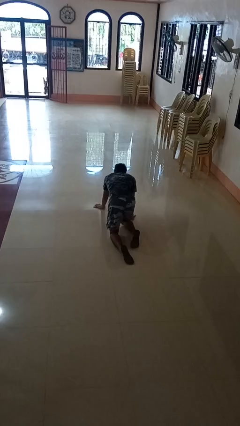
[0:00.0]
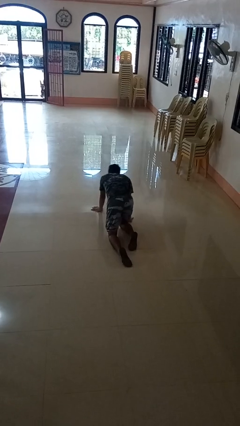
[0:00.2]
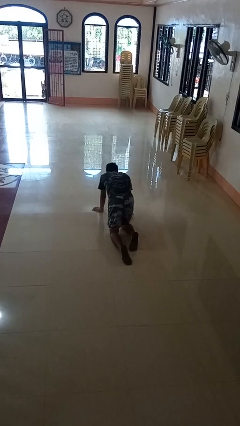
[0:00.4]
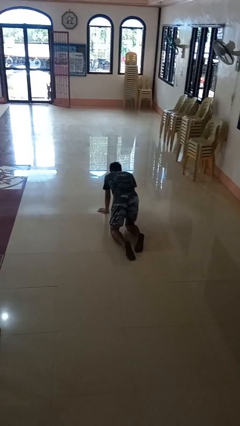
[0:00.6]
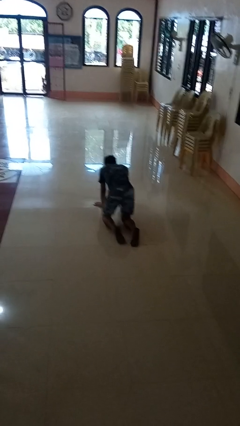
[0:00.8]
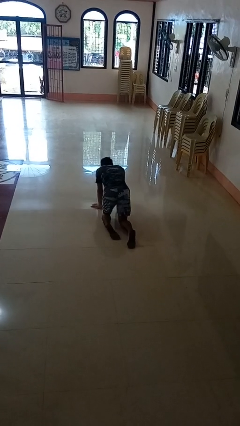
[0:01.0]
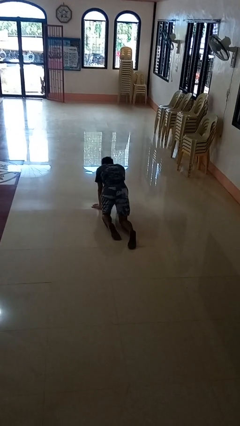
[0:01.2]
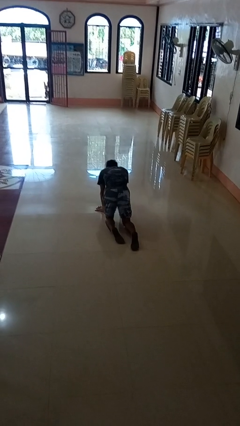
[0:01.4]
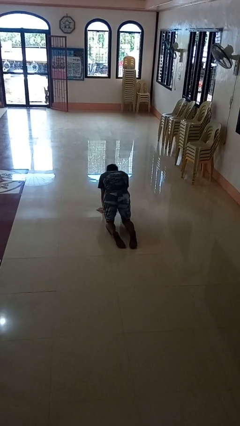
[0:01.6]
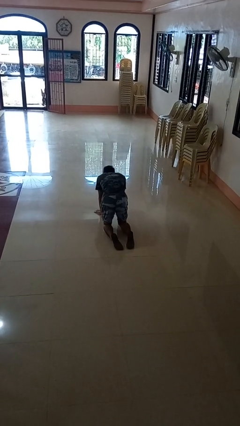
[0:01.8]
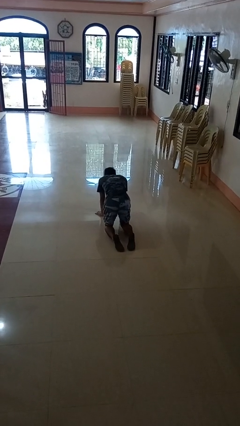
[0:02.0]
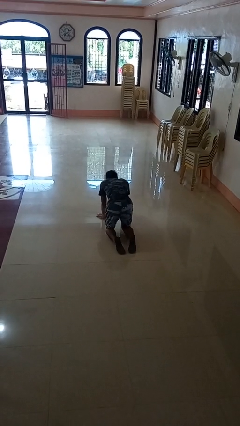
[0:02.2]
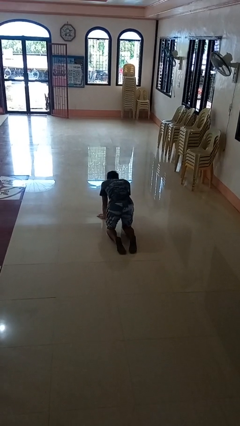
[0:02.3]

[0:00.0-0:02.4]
person crawls

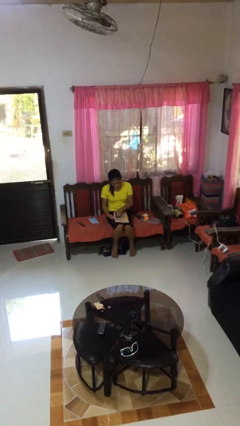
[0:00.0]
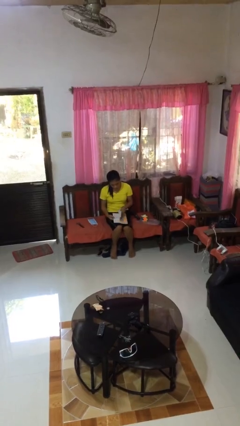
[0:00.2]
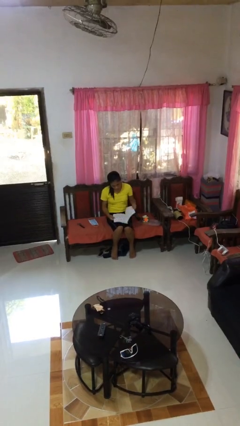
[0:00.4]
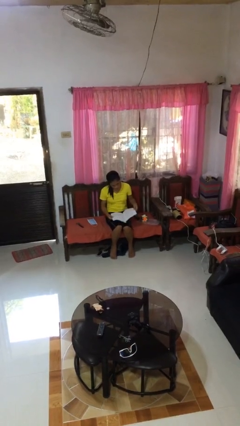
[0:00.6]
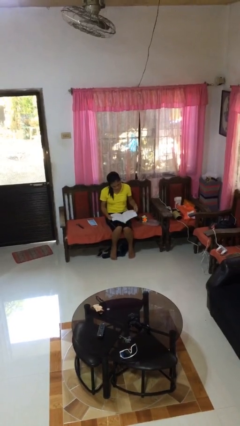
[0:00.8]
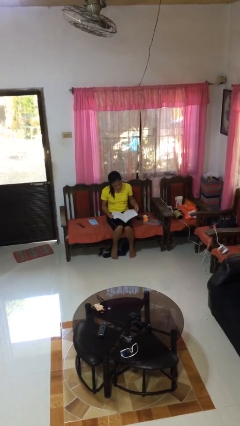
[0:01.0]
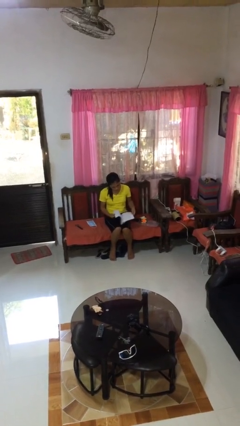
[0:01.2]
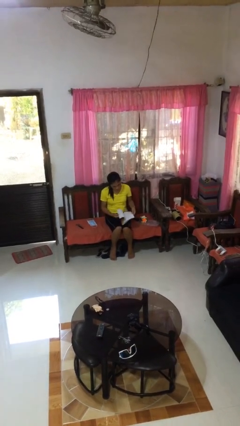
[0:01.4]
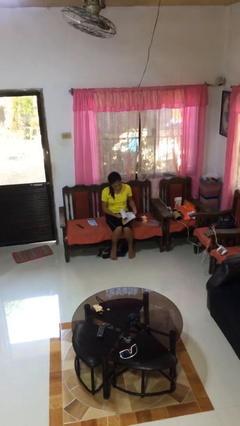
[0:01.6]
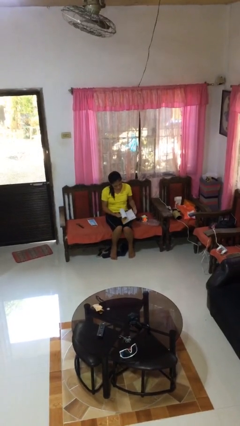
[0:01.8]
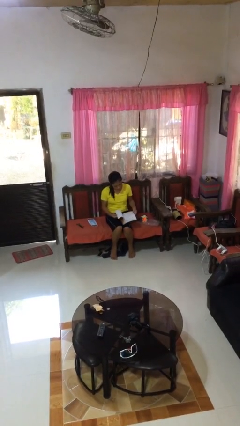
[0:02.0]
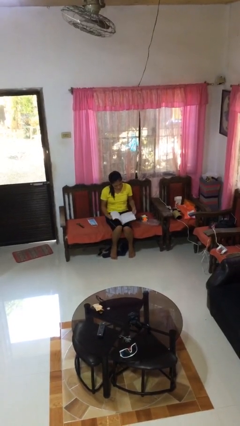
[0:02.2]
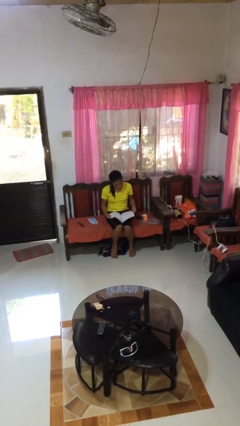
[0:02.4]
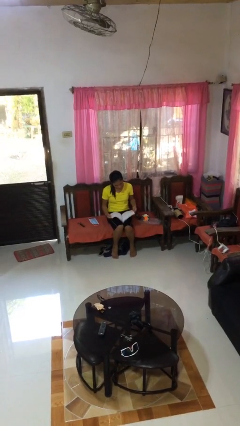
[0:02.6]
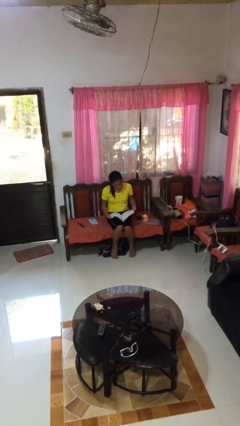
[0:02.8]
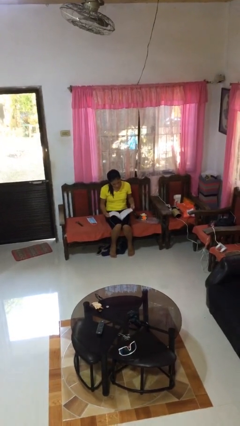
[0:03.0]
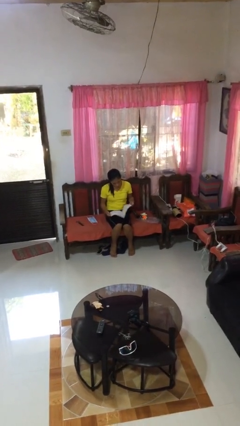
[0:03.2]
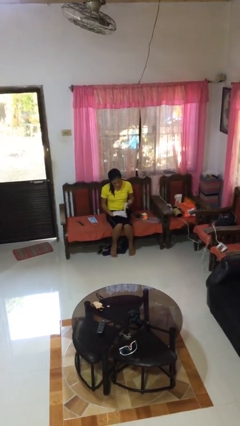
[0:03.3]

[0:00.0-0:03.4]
person reads book

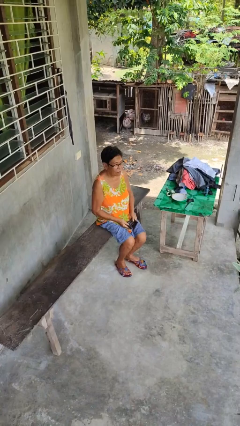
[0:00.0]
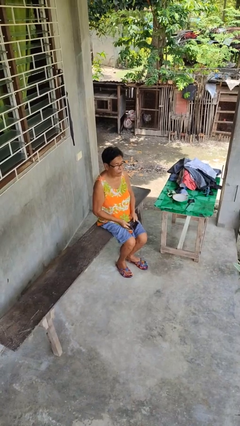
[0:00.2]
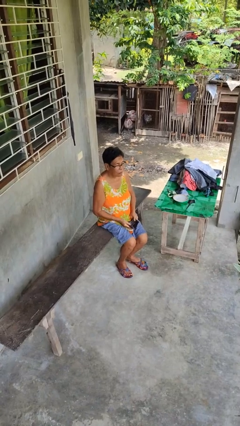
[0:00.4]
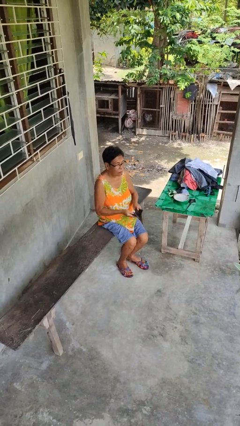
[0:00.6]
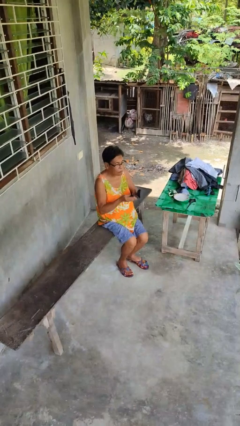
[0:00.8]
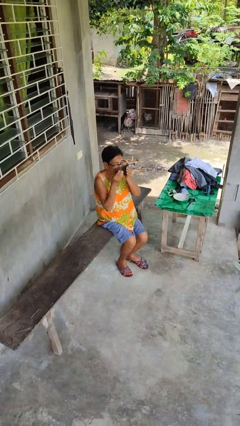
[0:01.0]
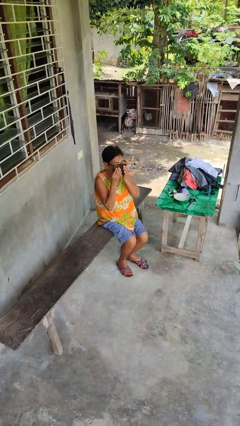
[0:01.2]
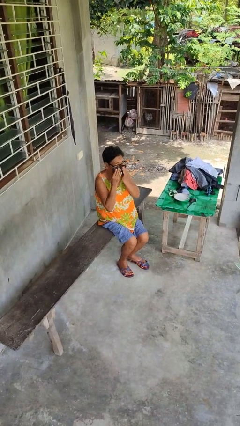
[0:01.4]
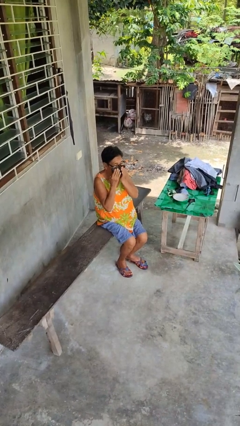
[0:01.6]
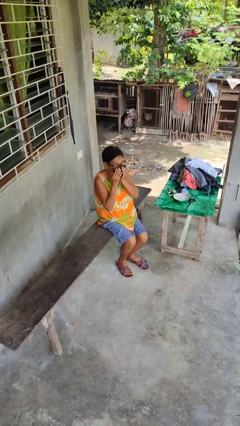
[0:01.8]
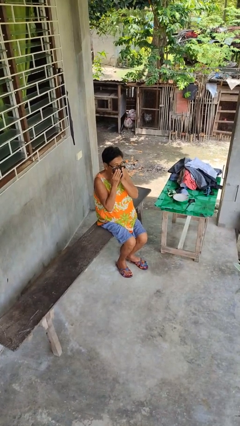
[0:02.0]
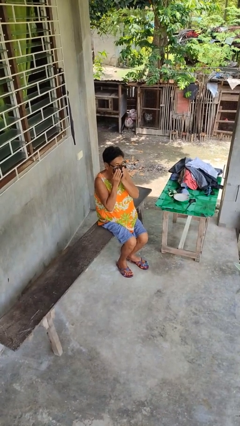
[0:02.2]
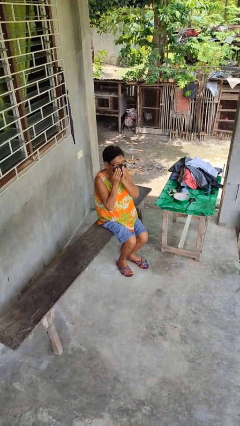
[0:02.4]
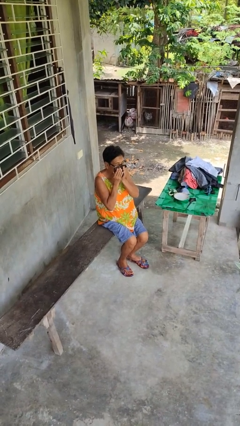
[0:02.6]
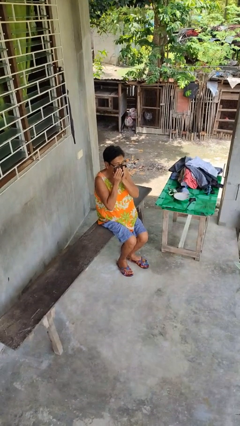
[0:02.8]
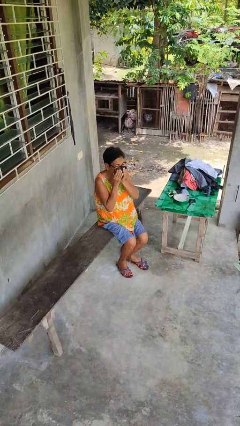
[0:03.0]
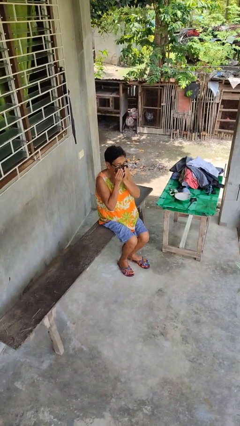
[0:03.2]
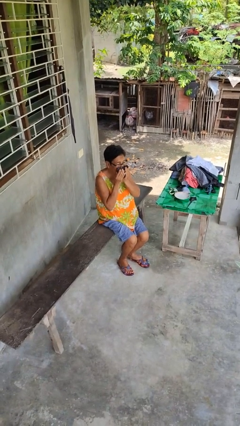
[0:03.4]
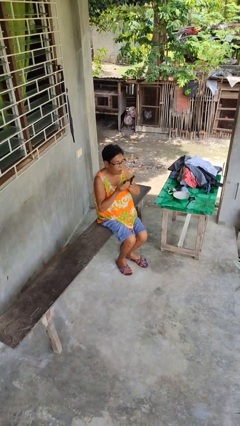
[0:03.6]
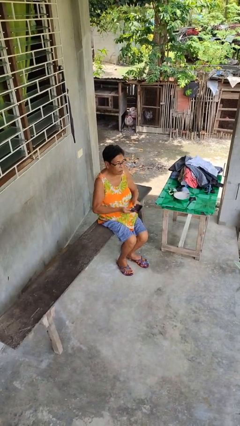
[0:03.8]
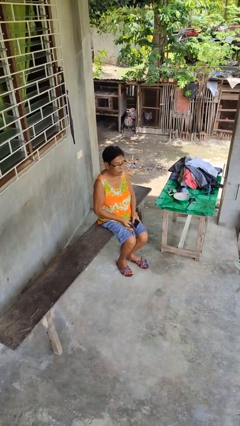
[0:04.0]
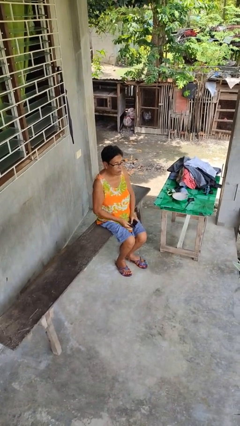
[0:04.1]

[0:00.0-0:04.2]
person blows nose

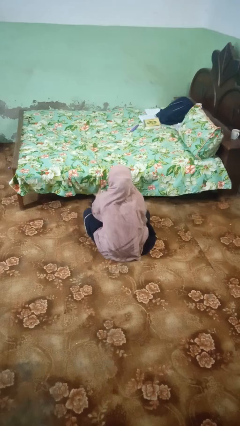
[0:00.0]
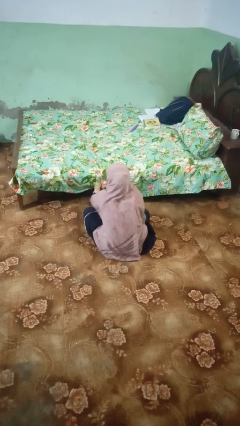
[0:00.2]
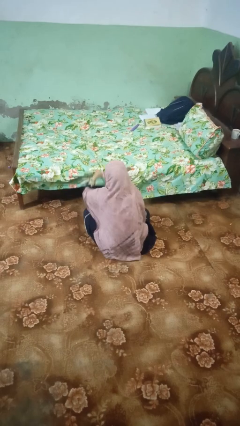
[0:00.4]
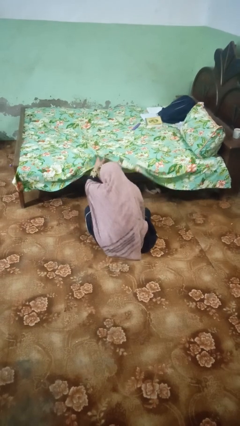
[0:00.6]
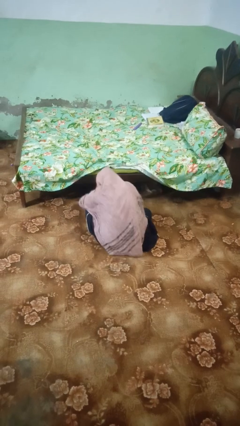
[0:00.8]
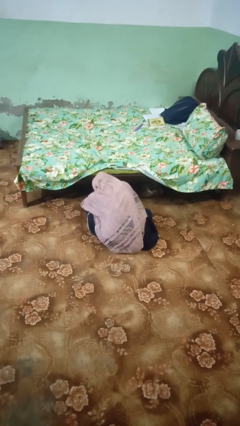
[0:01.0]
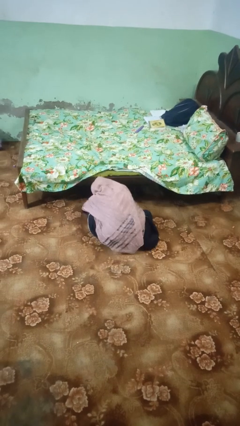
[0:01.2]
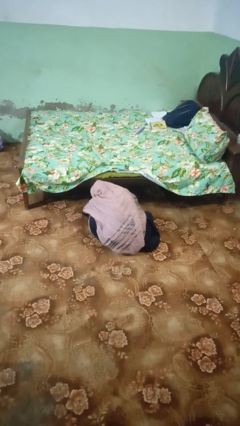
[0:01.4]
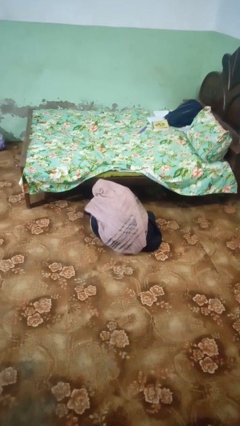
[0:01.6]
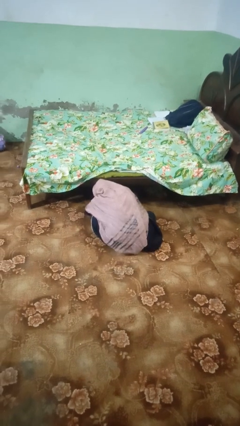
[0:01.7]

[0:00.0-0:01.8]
person searches under bed

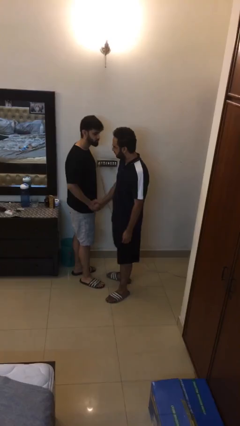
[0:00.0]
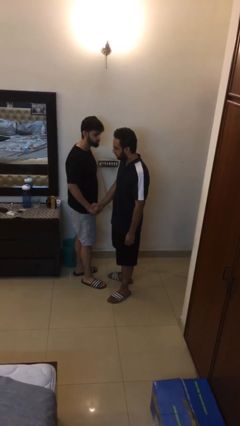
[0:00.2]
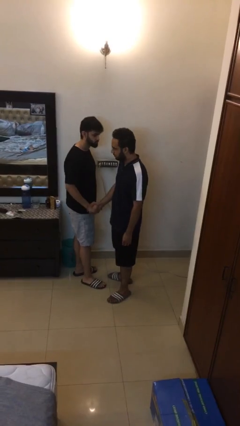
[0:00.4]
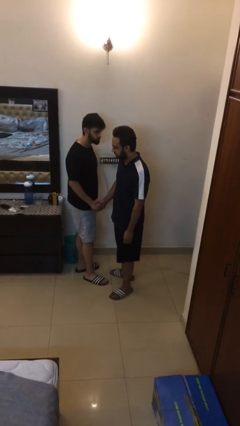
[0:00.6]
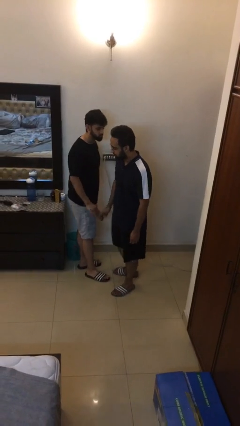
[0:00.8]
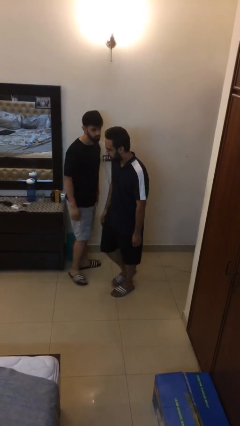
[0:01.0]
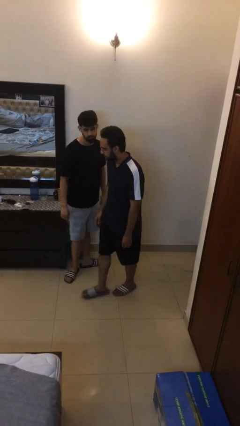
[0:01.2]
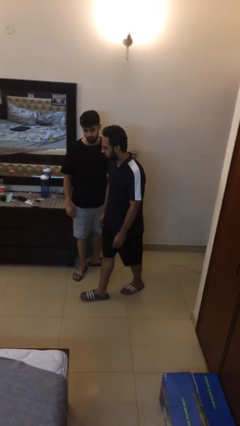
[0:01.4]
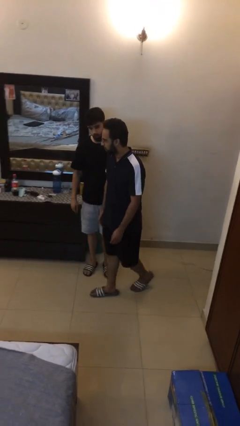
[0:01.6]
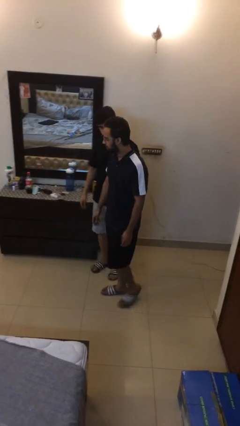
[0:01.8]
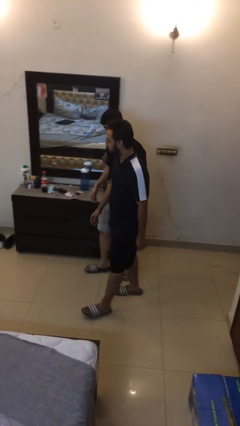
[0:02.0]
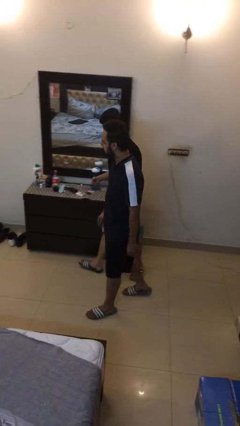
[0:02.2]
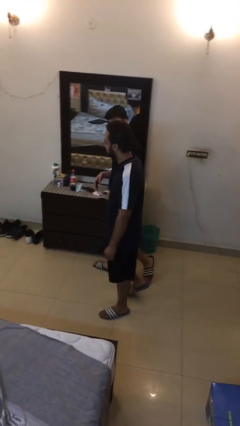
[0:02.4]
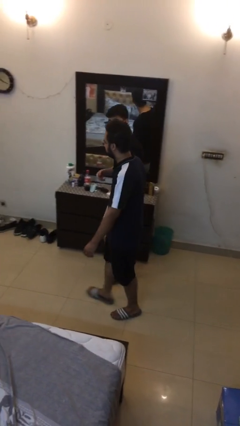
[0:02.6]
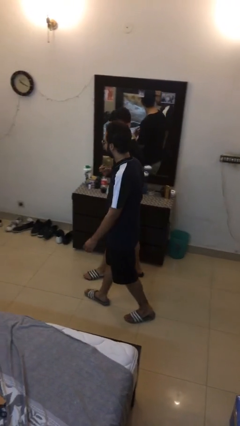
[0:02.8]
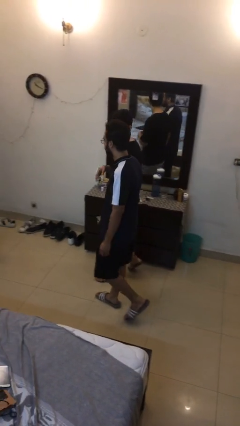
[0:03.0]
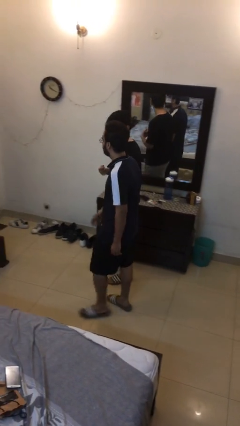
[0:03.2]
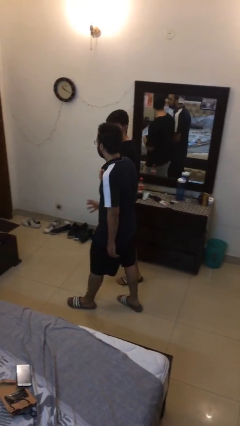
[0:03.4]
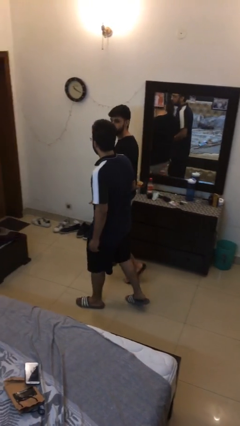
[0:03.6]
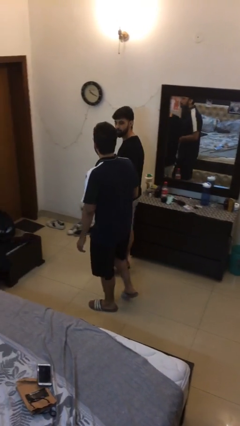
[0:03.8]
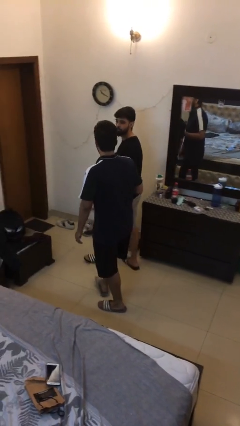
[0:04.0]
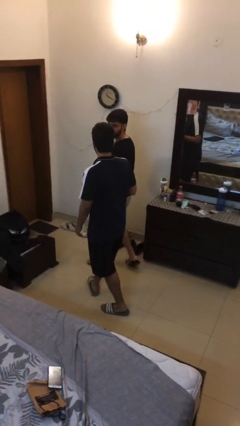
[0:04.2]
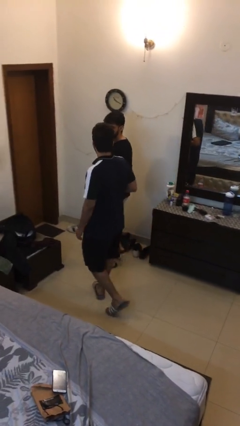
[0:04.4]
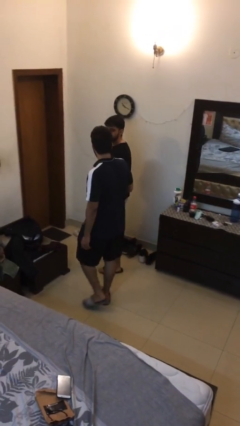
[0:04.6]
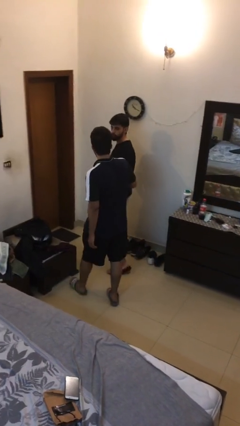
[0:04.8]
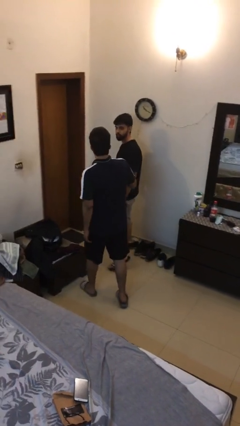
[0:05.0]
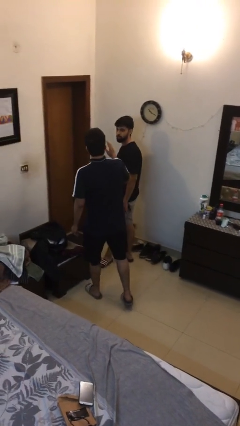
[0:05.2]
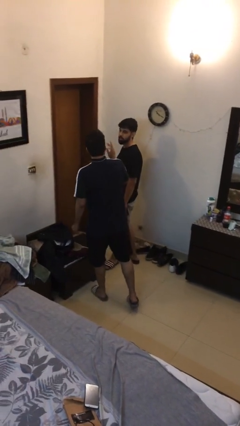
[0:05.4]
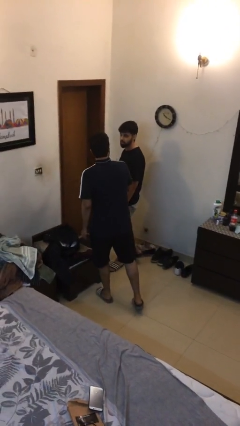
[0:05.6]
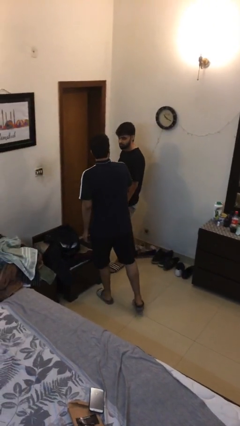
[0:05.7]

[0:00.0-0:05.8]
person talks to person

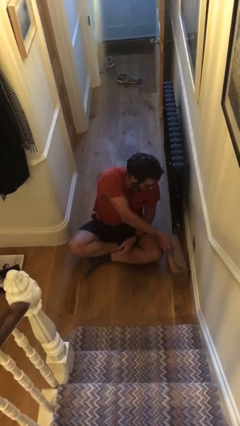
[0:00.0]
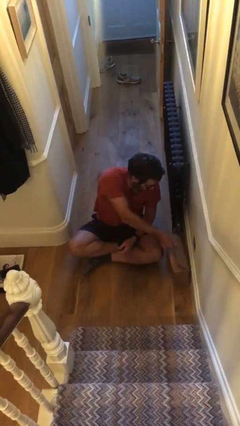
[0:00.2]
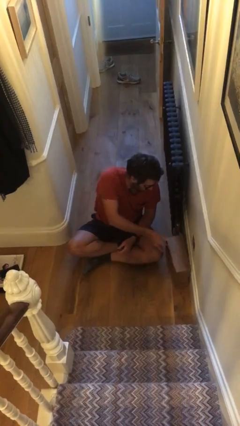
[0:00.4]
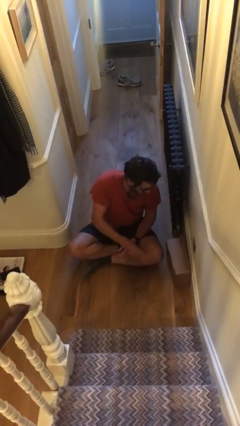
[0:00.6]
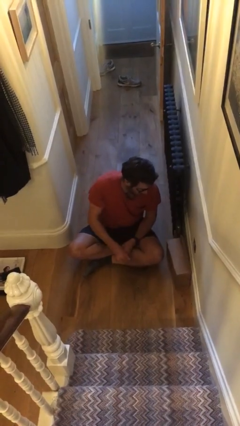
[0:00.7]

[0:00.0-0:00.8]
person puts down object on floor
